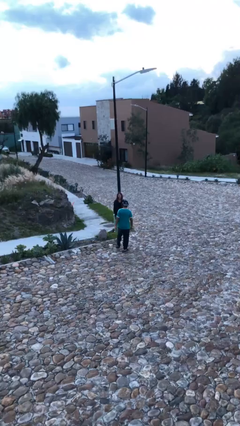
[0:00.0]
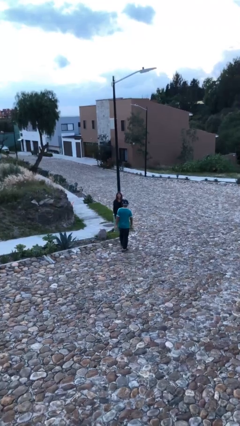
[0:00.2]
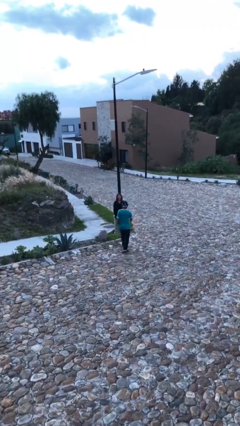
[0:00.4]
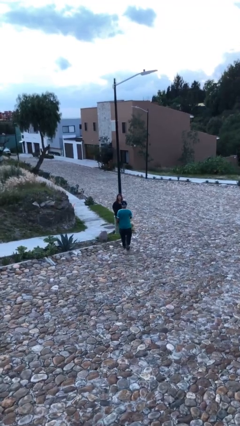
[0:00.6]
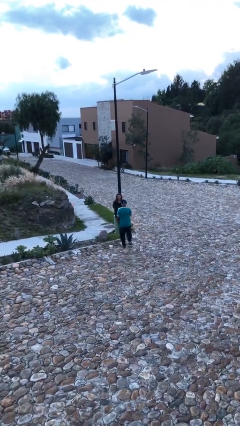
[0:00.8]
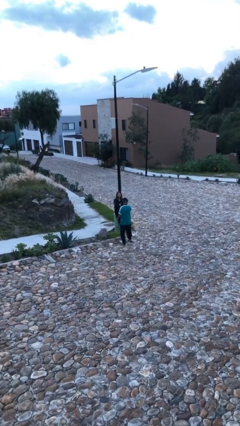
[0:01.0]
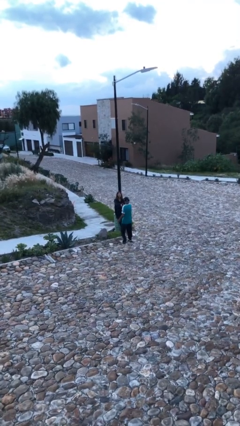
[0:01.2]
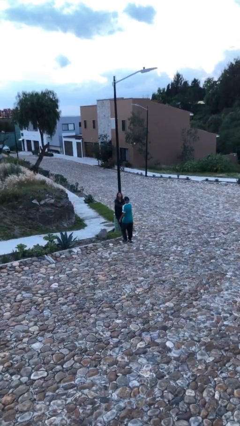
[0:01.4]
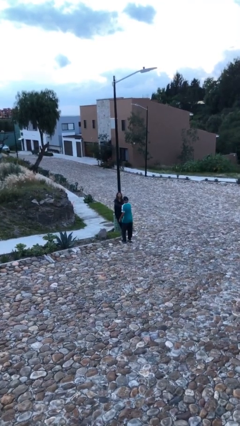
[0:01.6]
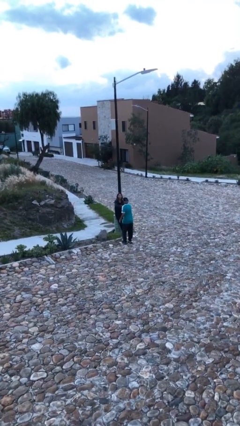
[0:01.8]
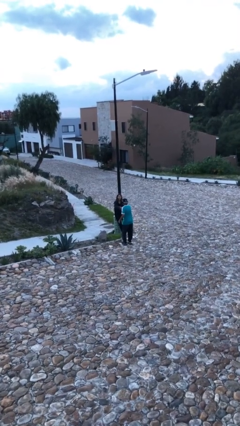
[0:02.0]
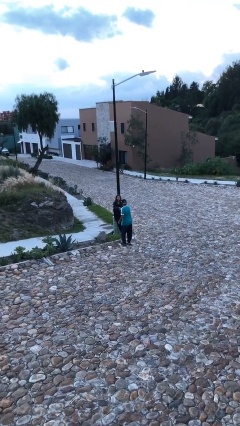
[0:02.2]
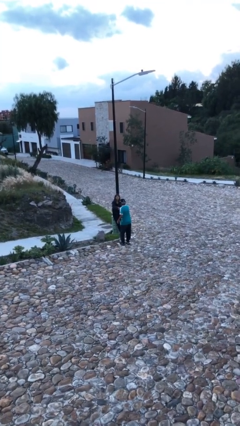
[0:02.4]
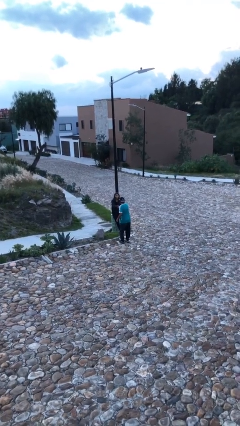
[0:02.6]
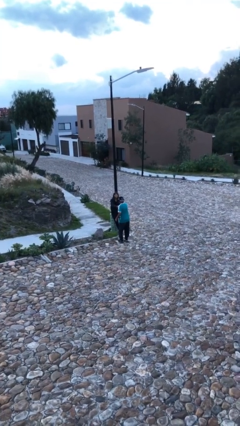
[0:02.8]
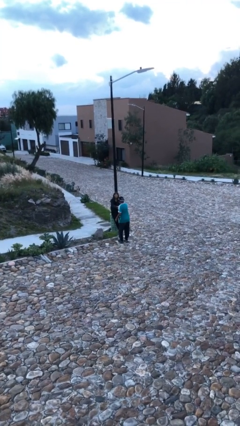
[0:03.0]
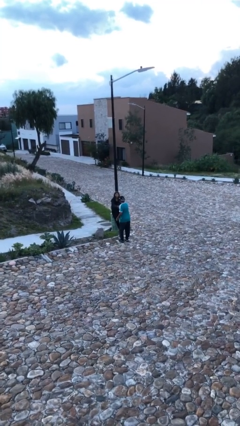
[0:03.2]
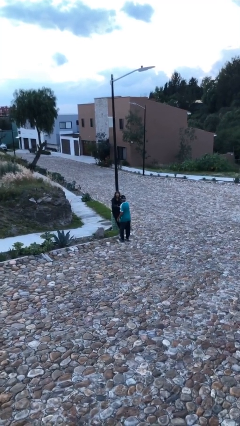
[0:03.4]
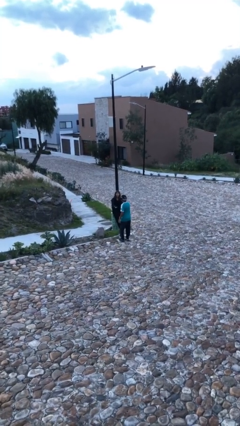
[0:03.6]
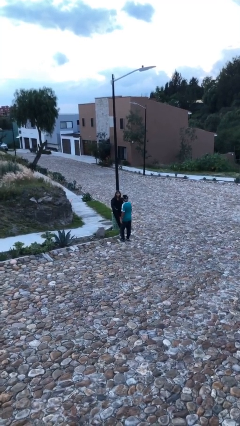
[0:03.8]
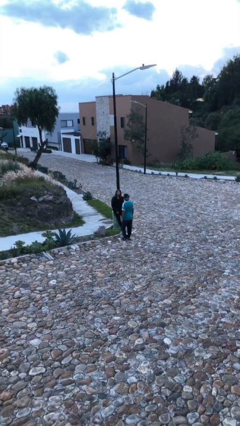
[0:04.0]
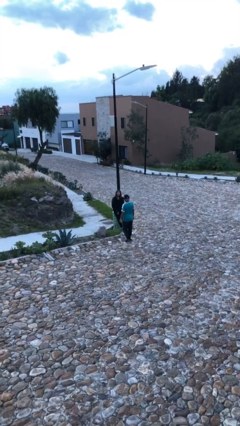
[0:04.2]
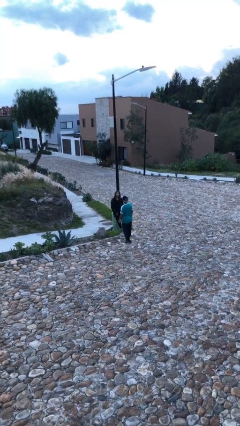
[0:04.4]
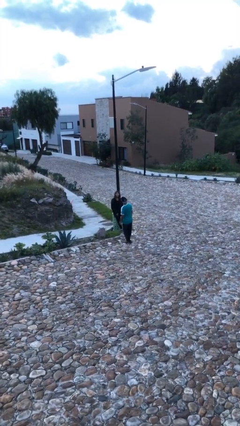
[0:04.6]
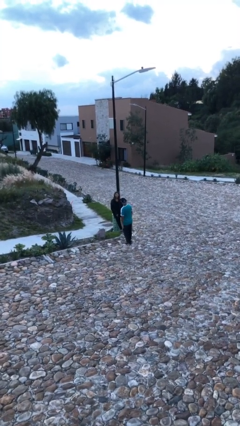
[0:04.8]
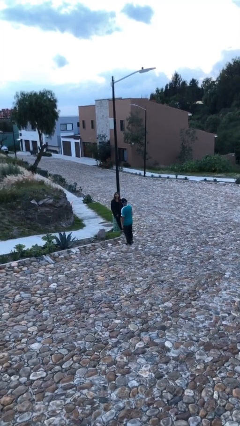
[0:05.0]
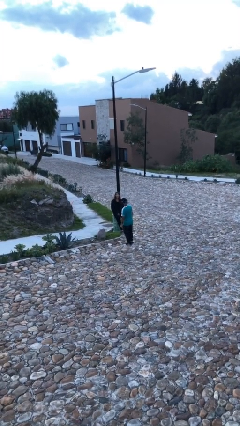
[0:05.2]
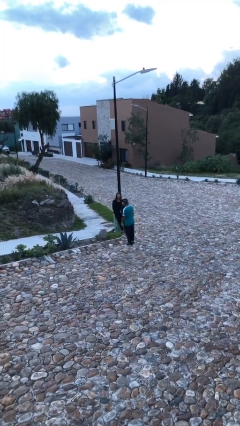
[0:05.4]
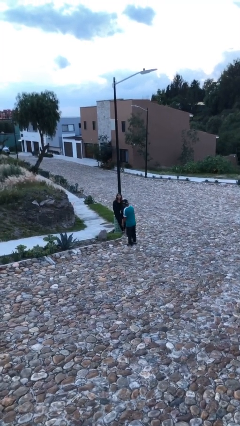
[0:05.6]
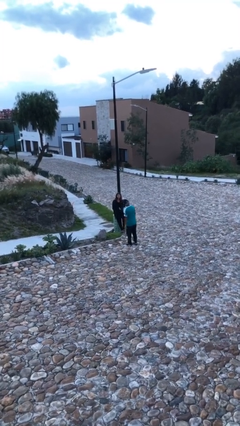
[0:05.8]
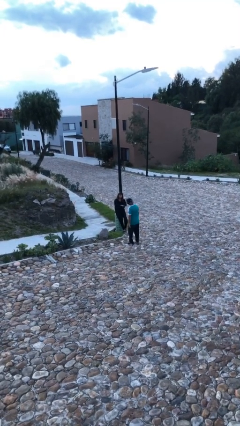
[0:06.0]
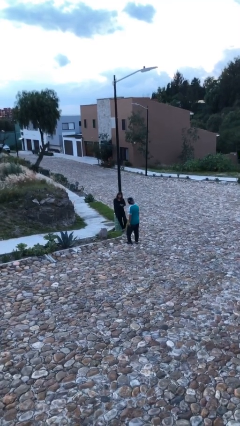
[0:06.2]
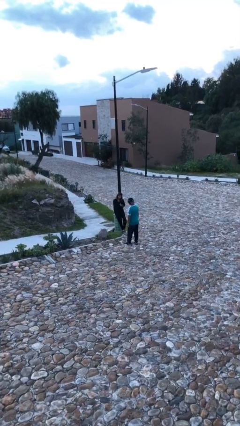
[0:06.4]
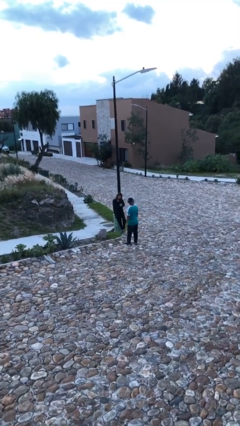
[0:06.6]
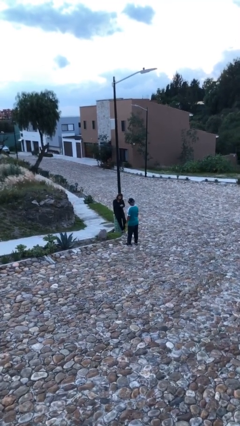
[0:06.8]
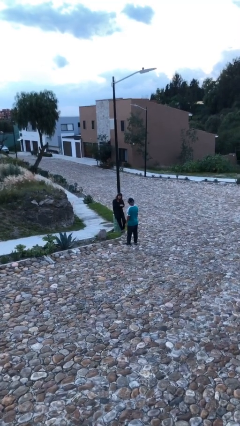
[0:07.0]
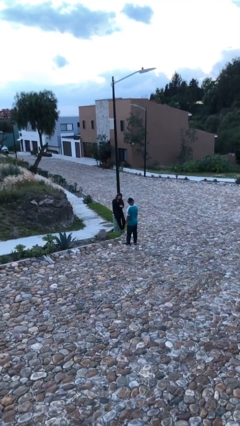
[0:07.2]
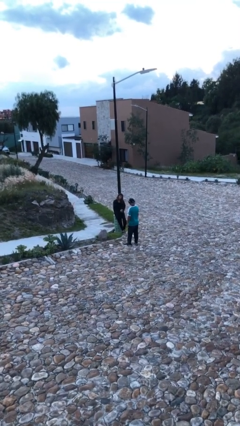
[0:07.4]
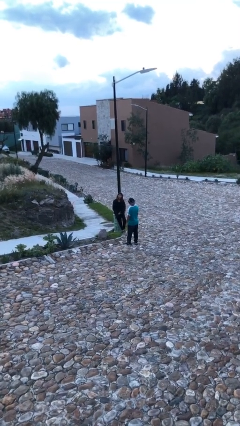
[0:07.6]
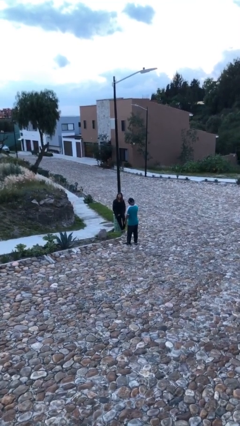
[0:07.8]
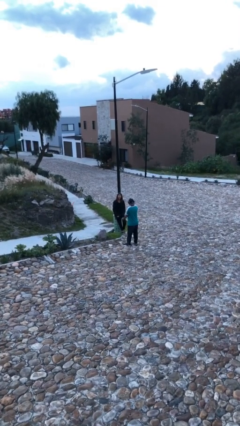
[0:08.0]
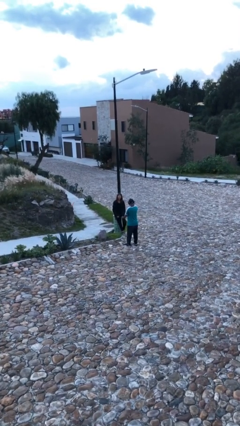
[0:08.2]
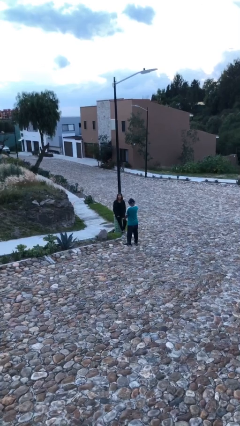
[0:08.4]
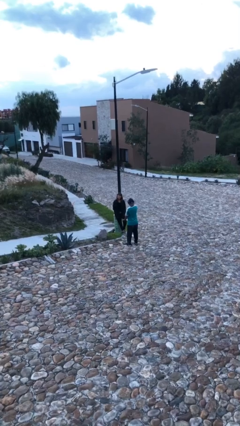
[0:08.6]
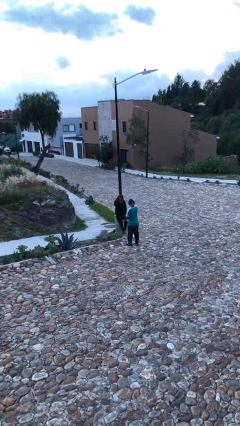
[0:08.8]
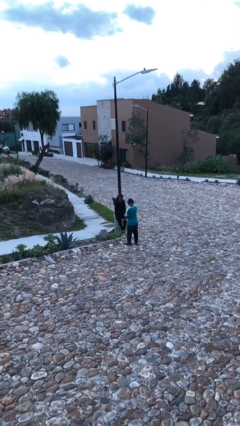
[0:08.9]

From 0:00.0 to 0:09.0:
person shakes hand

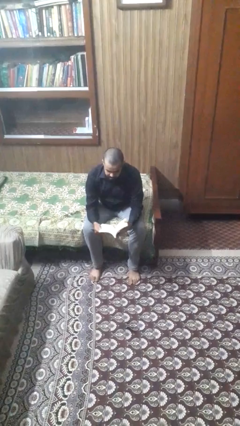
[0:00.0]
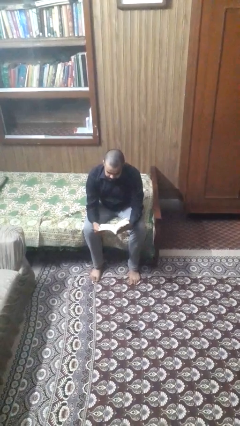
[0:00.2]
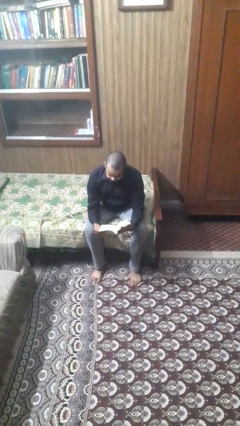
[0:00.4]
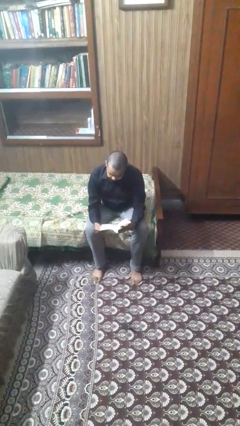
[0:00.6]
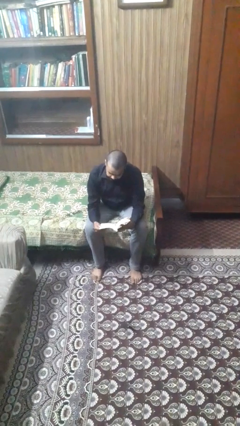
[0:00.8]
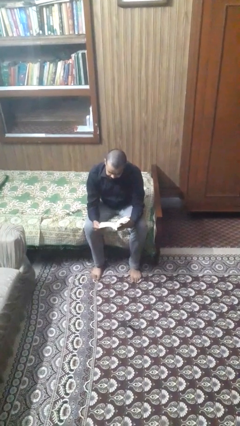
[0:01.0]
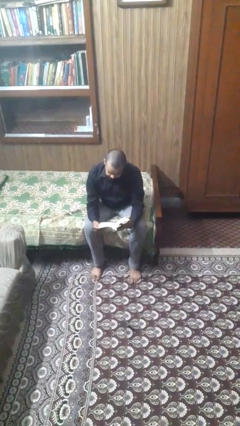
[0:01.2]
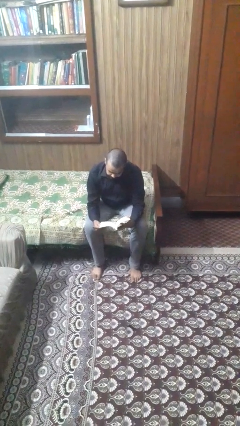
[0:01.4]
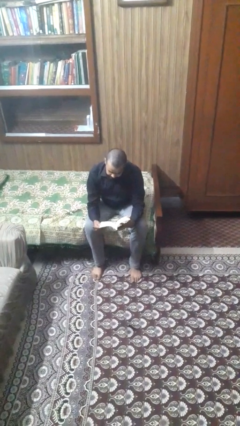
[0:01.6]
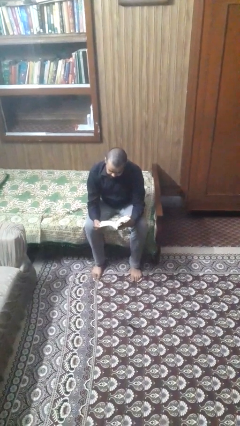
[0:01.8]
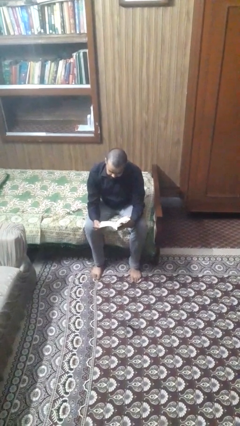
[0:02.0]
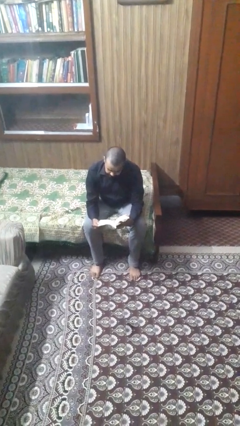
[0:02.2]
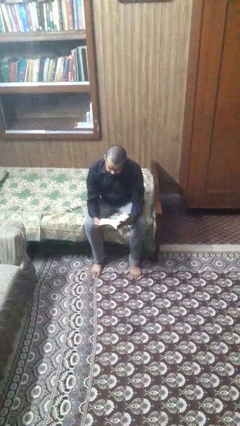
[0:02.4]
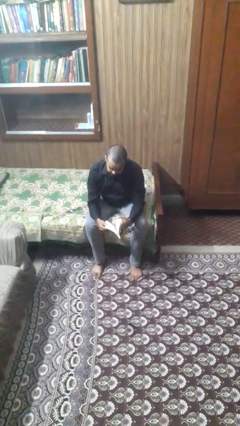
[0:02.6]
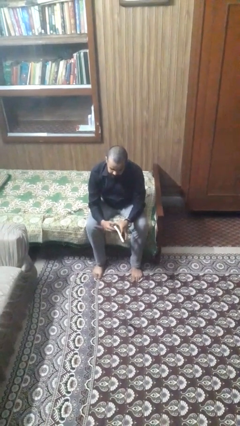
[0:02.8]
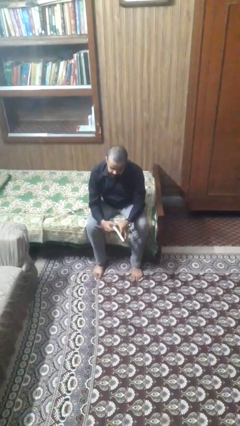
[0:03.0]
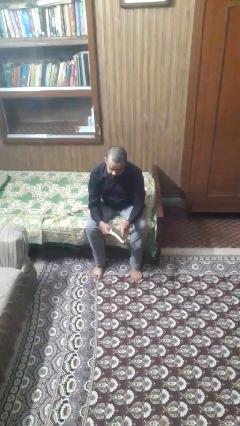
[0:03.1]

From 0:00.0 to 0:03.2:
person reads magazine

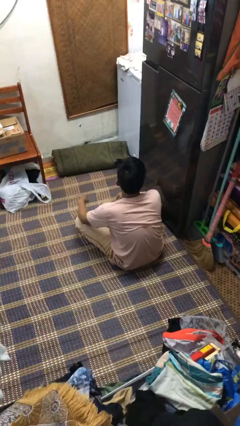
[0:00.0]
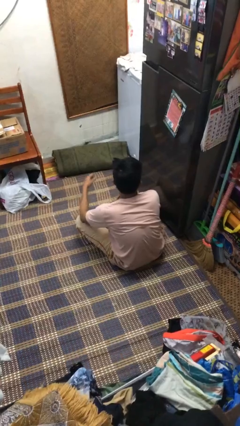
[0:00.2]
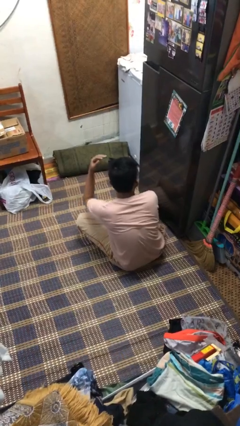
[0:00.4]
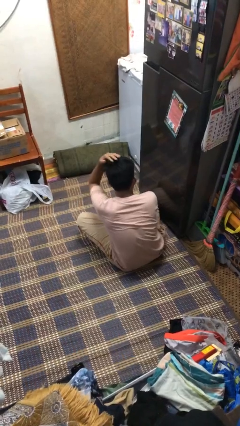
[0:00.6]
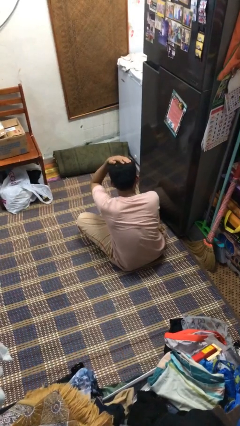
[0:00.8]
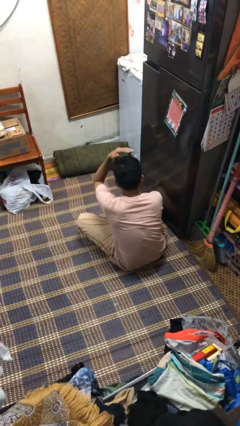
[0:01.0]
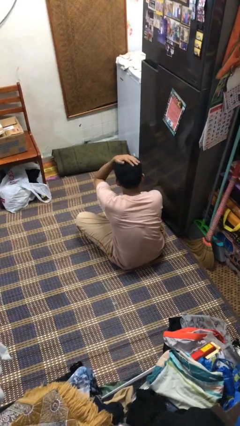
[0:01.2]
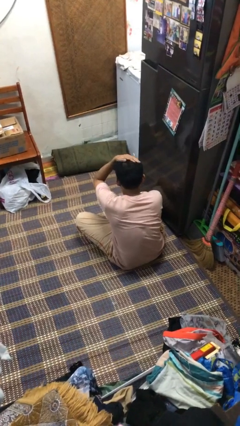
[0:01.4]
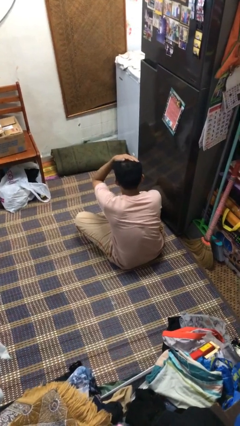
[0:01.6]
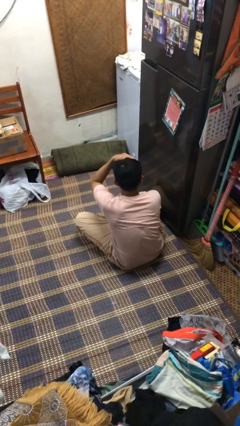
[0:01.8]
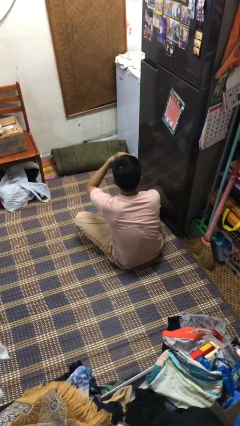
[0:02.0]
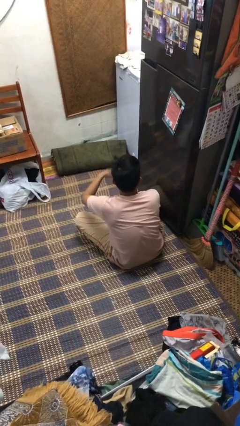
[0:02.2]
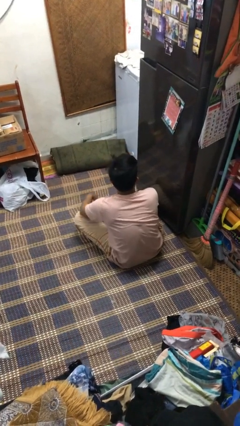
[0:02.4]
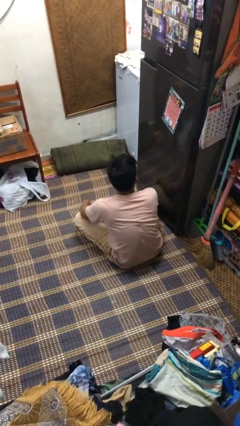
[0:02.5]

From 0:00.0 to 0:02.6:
person pats head

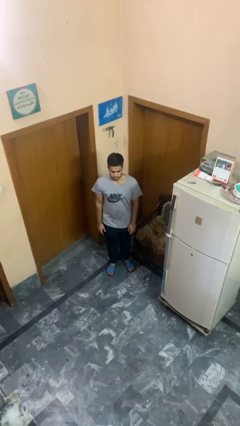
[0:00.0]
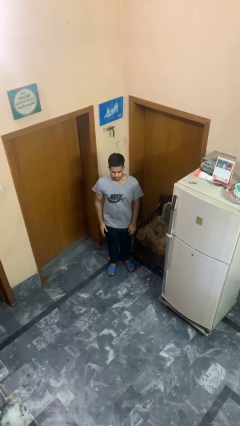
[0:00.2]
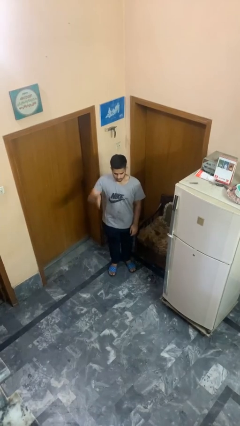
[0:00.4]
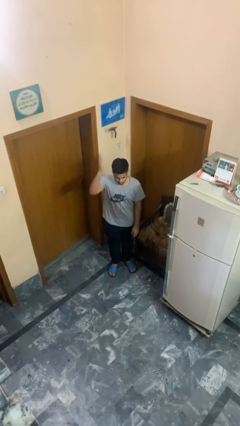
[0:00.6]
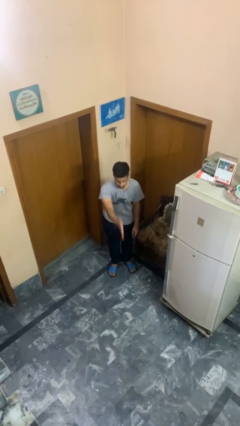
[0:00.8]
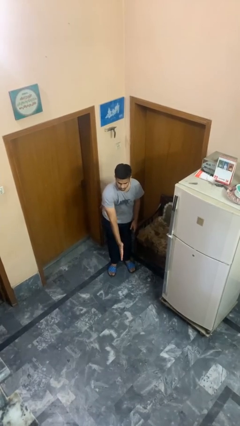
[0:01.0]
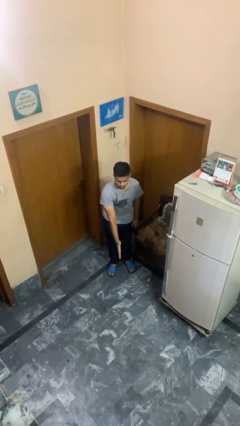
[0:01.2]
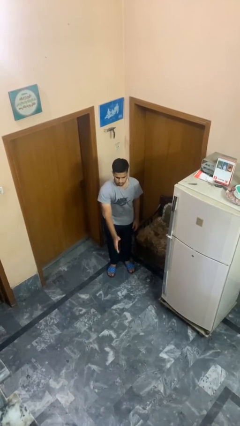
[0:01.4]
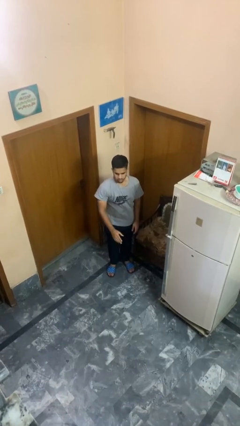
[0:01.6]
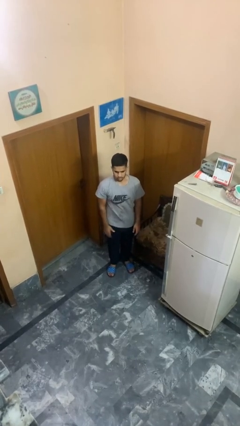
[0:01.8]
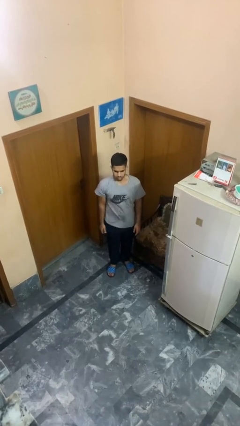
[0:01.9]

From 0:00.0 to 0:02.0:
person karate chop

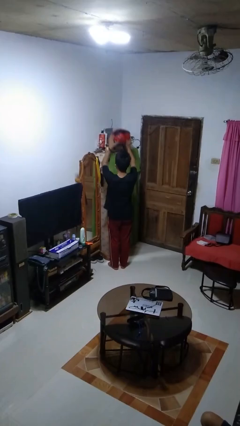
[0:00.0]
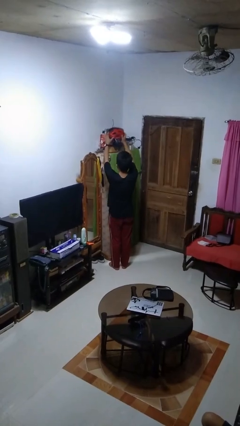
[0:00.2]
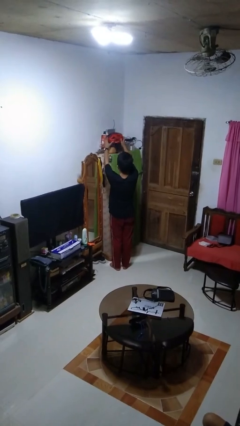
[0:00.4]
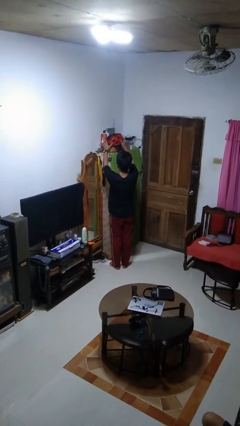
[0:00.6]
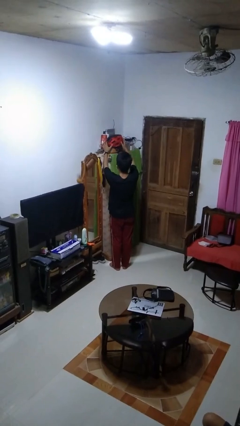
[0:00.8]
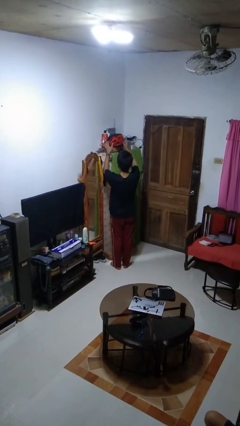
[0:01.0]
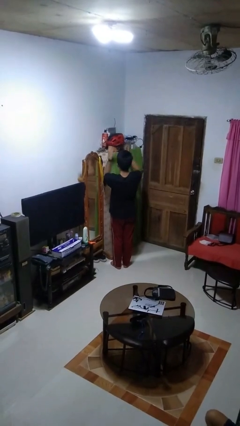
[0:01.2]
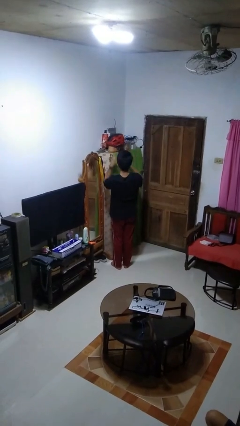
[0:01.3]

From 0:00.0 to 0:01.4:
person puts down object on shelf
